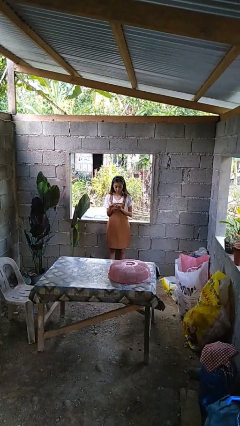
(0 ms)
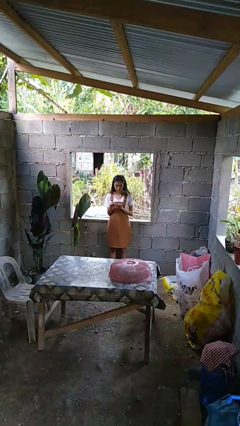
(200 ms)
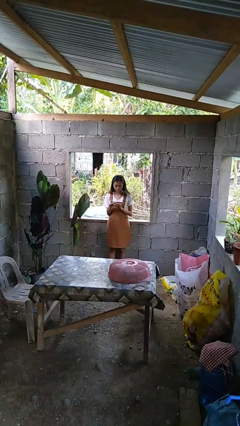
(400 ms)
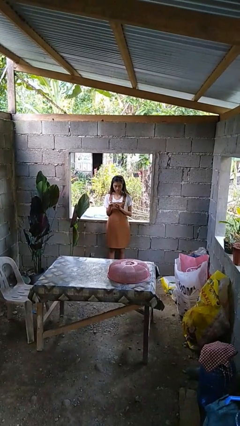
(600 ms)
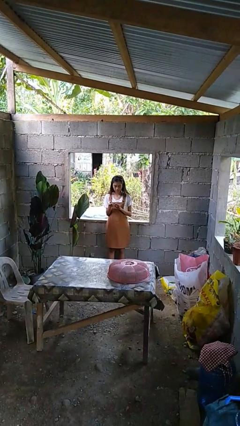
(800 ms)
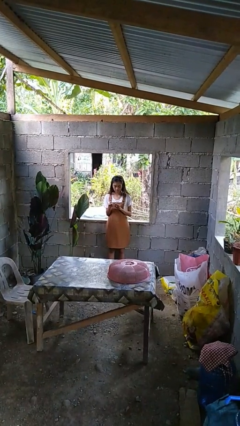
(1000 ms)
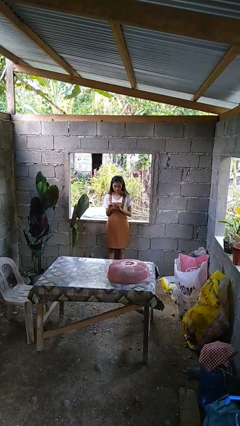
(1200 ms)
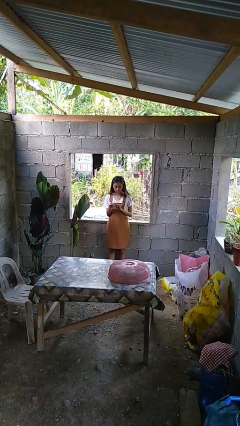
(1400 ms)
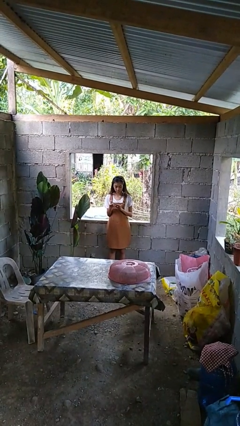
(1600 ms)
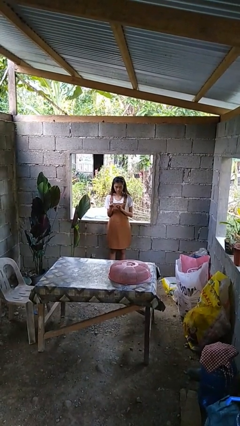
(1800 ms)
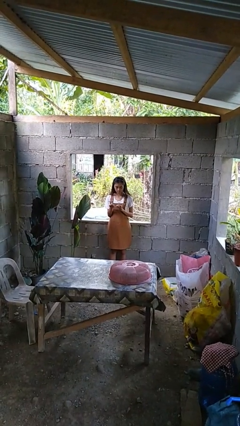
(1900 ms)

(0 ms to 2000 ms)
person clips fingernails

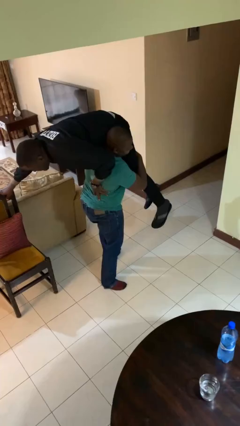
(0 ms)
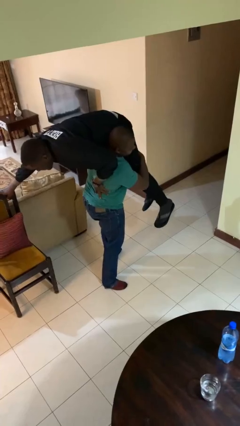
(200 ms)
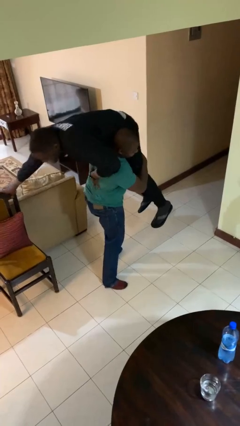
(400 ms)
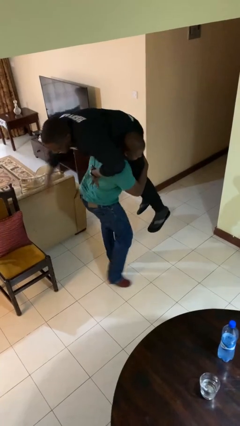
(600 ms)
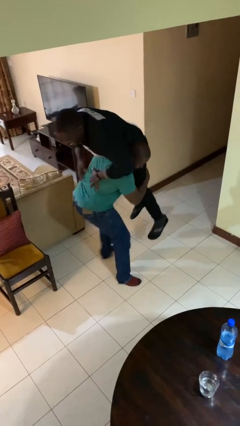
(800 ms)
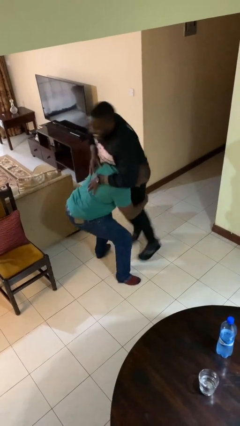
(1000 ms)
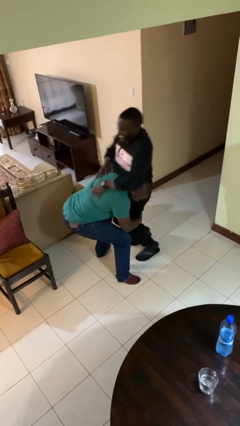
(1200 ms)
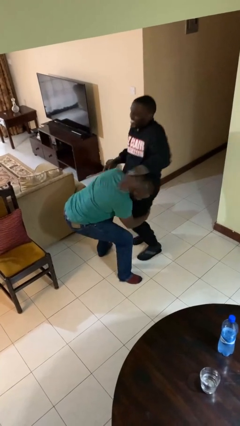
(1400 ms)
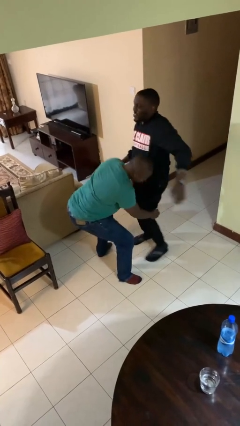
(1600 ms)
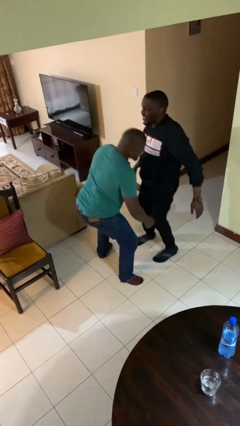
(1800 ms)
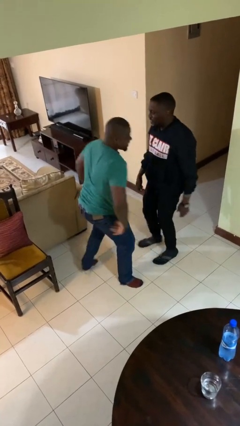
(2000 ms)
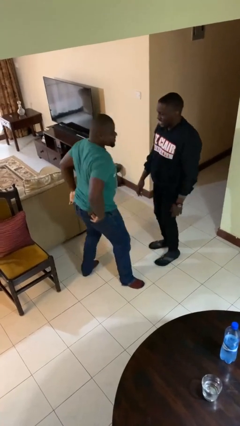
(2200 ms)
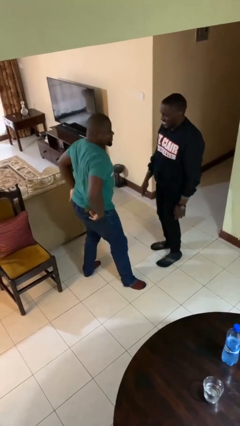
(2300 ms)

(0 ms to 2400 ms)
person puts down person

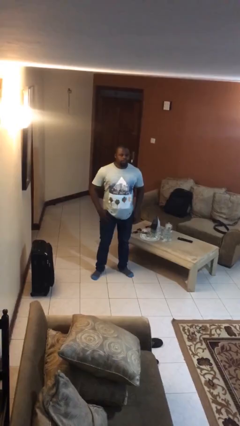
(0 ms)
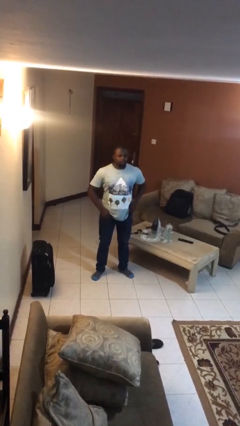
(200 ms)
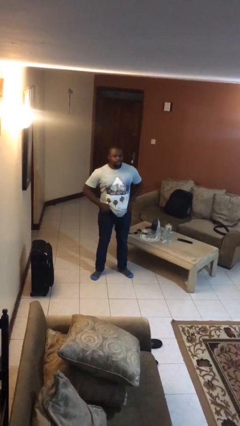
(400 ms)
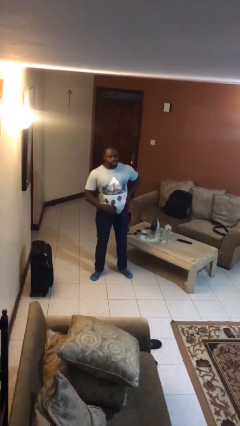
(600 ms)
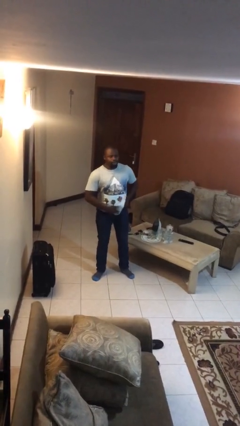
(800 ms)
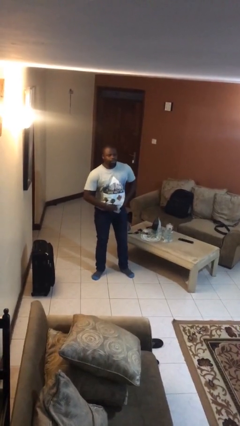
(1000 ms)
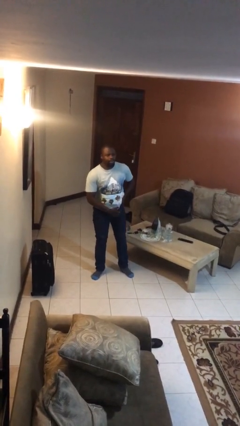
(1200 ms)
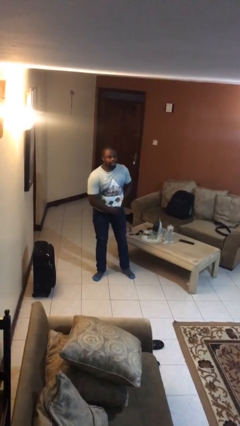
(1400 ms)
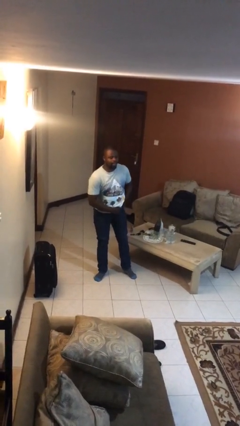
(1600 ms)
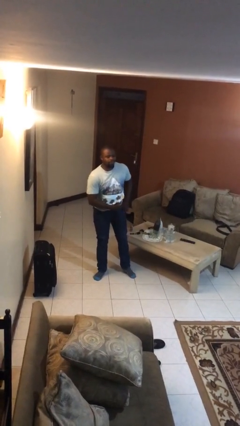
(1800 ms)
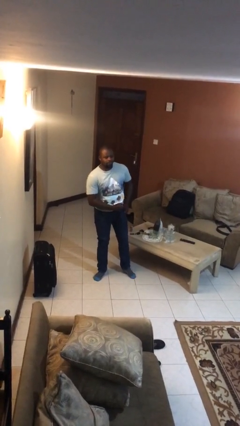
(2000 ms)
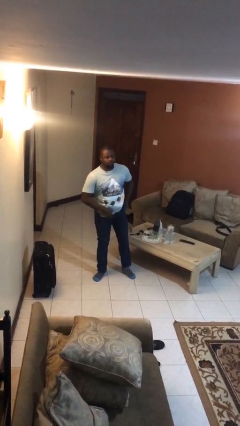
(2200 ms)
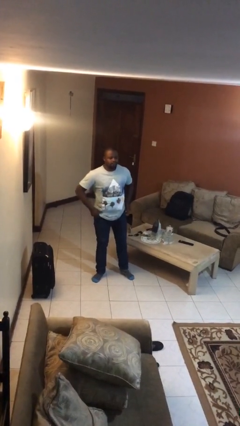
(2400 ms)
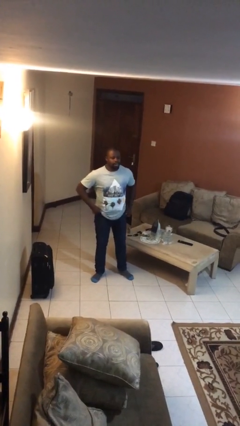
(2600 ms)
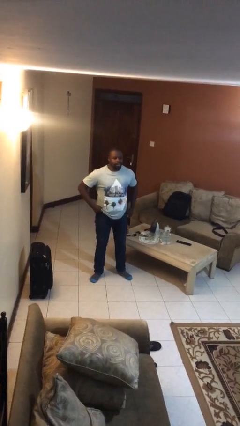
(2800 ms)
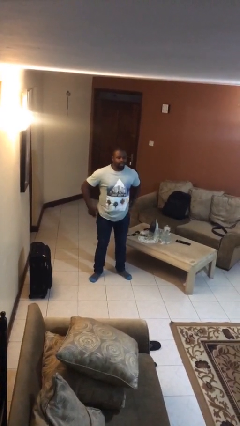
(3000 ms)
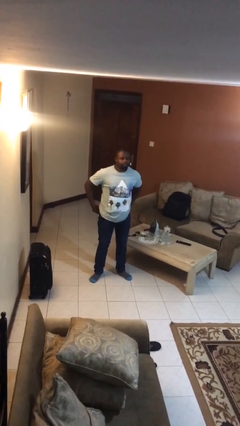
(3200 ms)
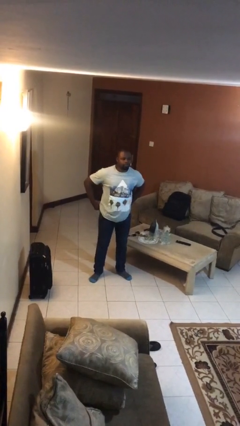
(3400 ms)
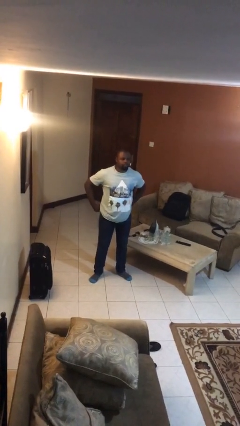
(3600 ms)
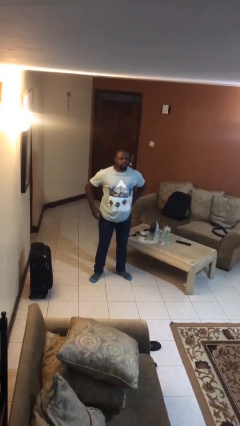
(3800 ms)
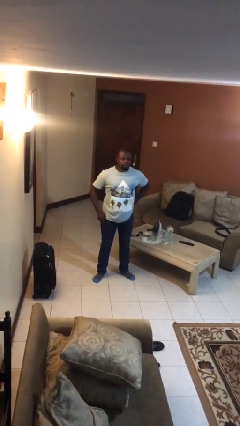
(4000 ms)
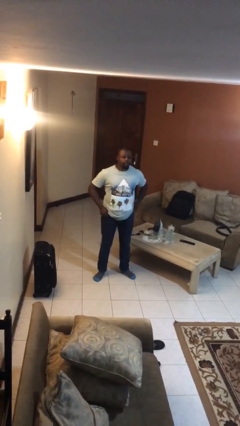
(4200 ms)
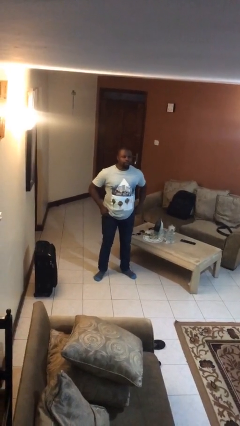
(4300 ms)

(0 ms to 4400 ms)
person hikes up pants

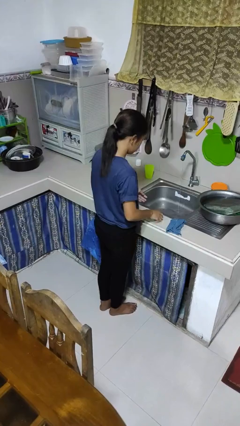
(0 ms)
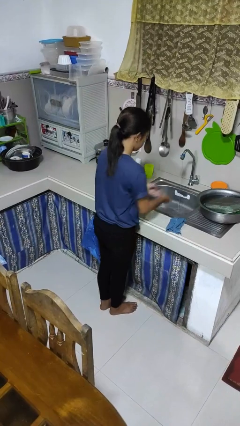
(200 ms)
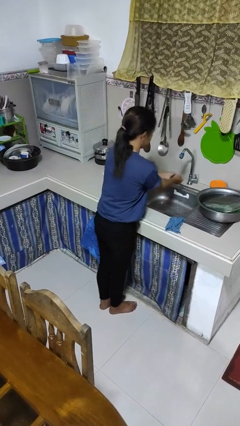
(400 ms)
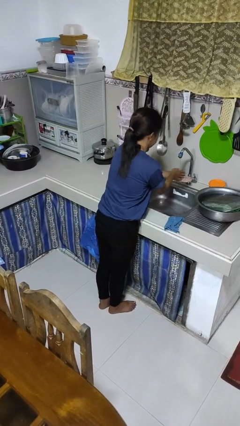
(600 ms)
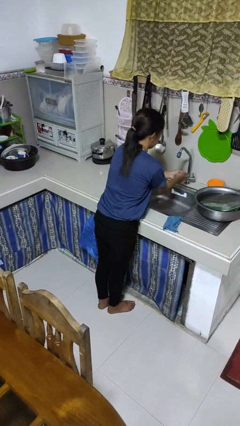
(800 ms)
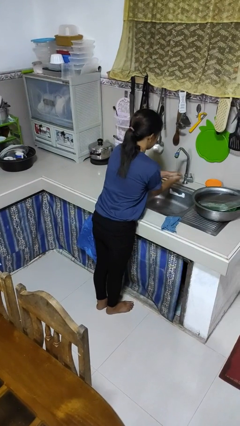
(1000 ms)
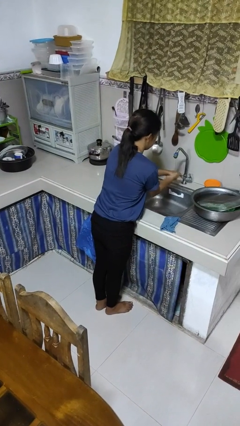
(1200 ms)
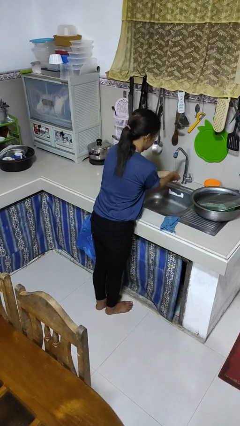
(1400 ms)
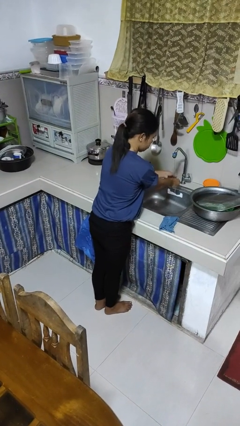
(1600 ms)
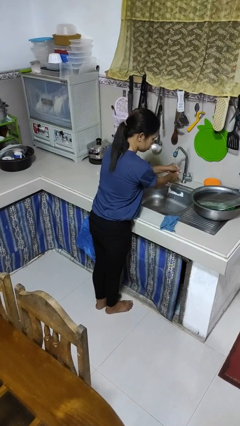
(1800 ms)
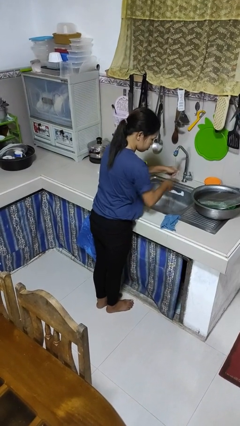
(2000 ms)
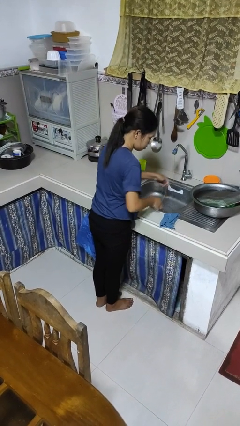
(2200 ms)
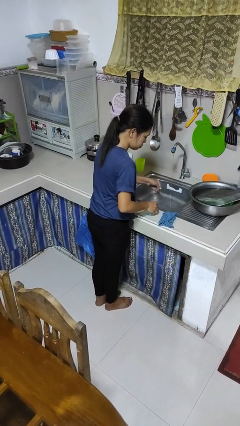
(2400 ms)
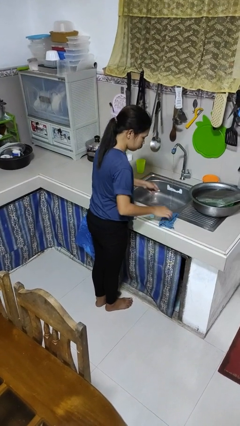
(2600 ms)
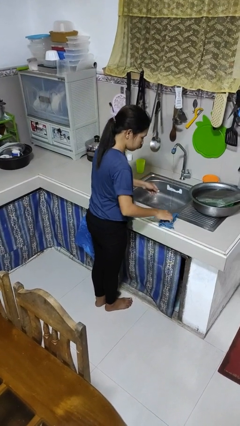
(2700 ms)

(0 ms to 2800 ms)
person washes hands

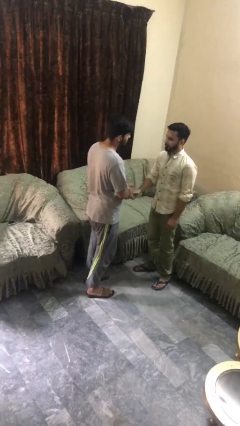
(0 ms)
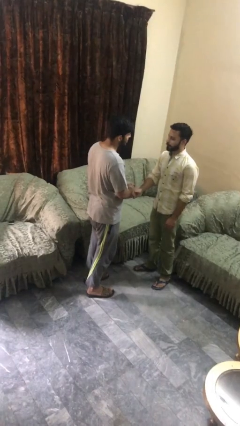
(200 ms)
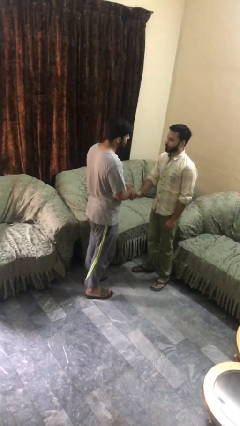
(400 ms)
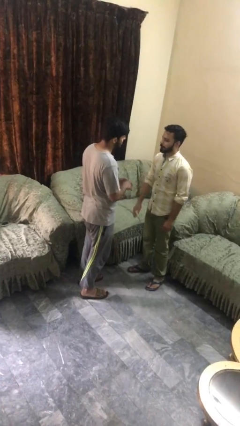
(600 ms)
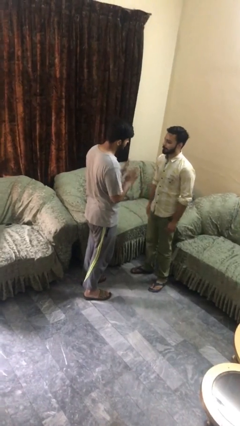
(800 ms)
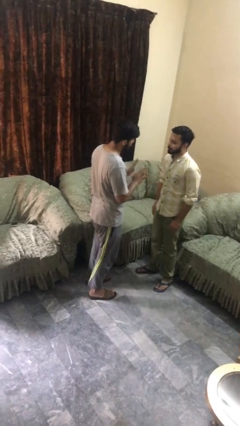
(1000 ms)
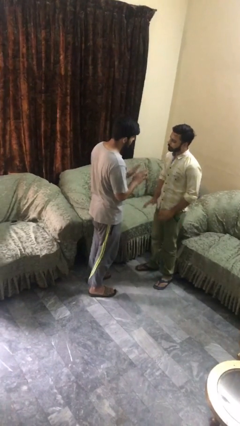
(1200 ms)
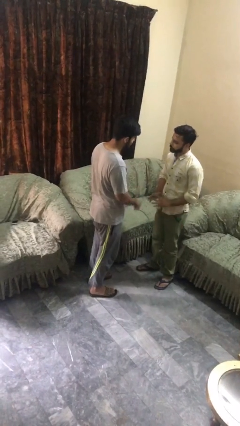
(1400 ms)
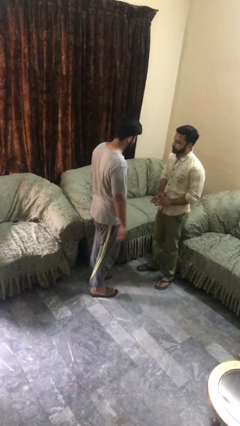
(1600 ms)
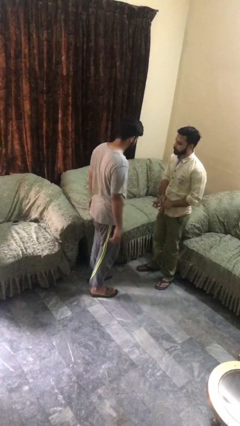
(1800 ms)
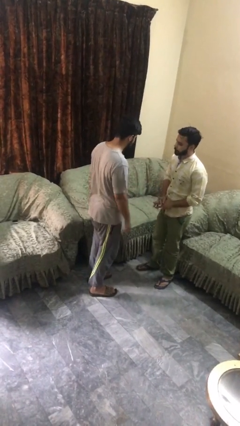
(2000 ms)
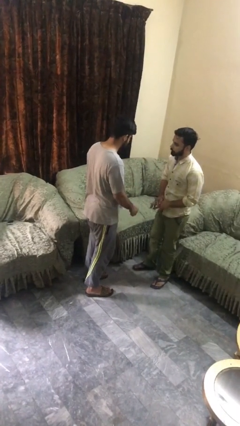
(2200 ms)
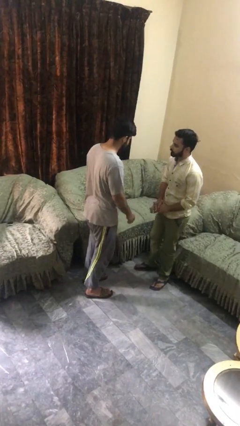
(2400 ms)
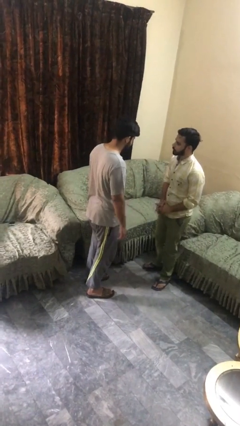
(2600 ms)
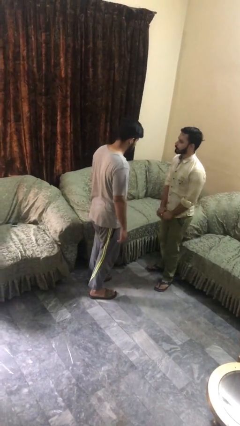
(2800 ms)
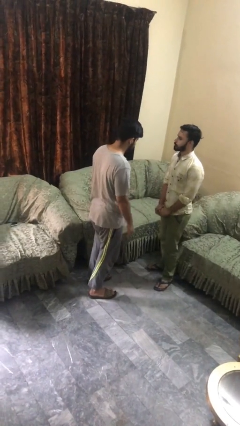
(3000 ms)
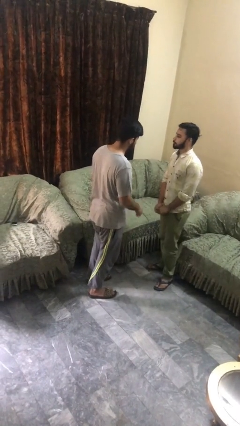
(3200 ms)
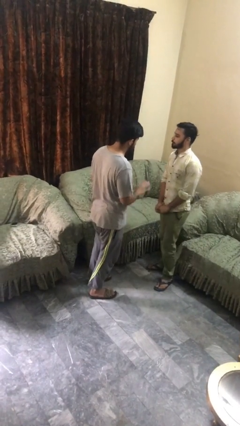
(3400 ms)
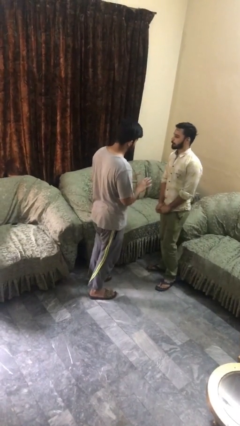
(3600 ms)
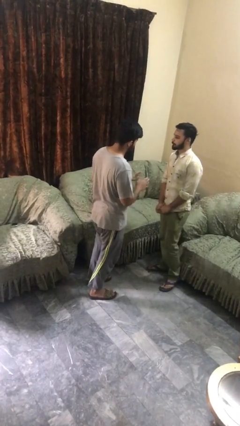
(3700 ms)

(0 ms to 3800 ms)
person talks to person

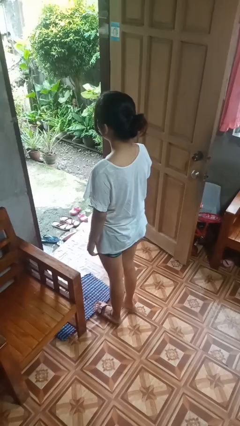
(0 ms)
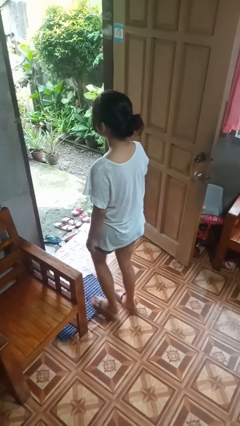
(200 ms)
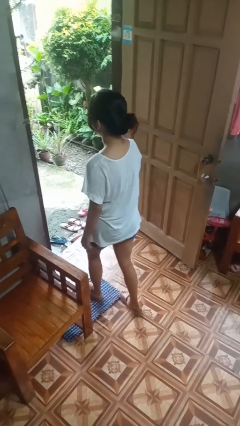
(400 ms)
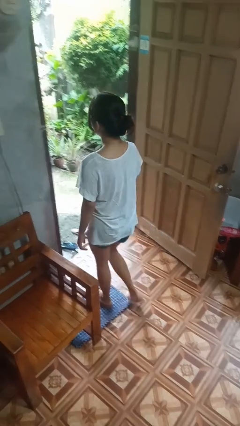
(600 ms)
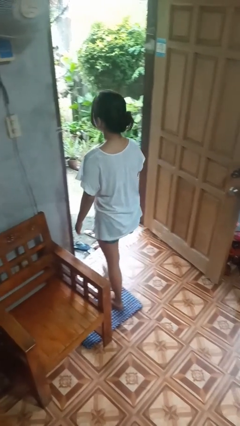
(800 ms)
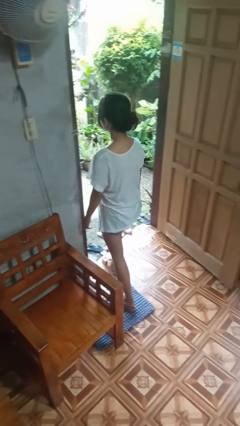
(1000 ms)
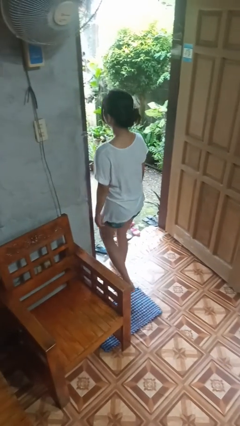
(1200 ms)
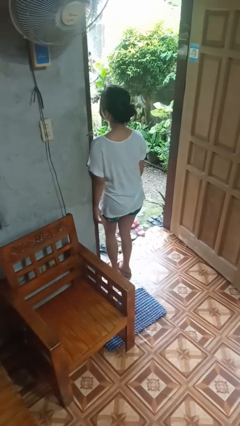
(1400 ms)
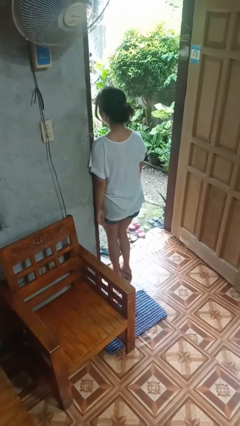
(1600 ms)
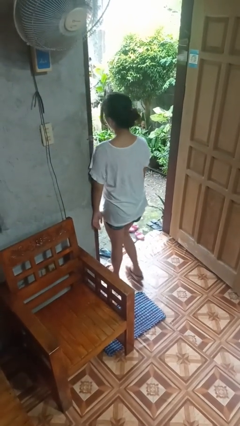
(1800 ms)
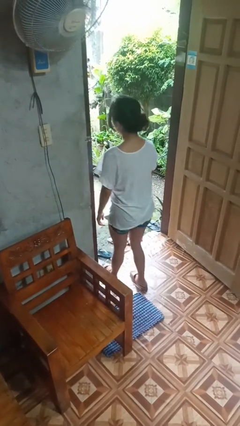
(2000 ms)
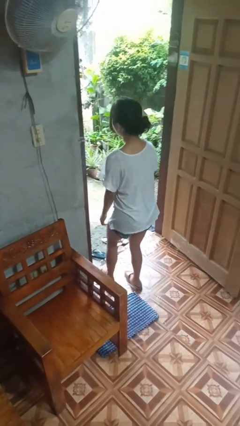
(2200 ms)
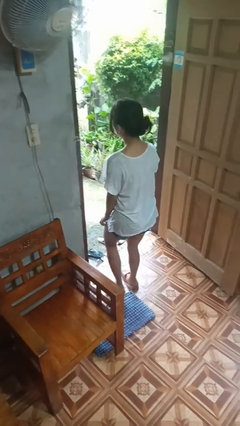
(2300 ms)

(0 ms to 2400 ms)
person bumps into wall
